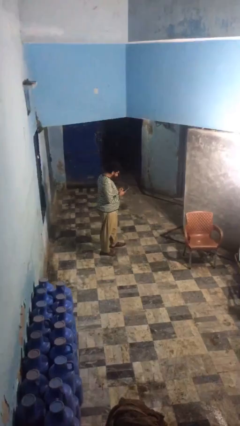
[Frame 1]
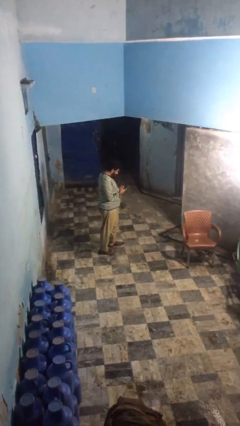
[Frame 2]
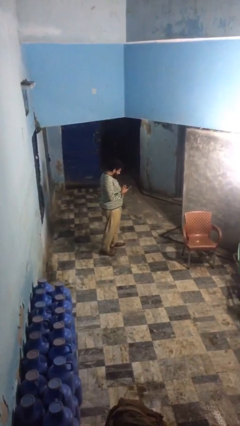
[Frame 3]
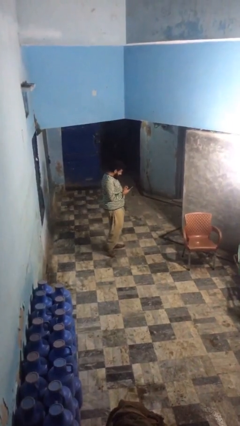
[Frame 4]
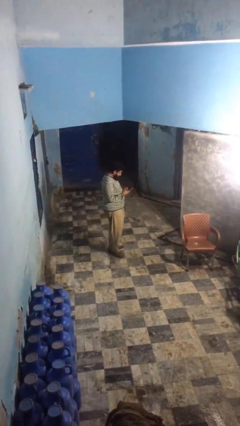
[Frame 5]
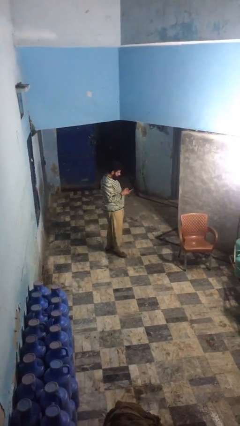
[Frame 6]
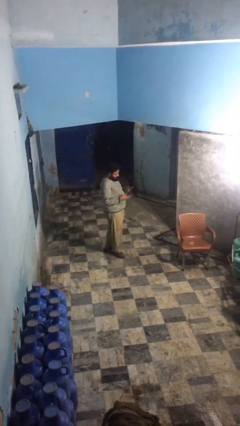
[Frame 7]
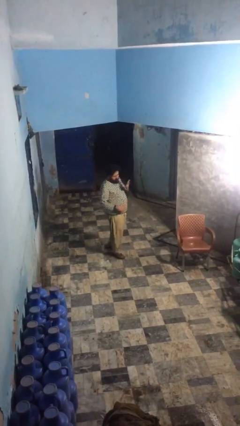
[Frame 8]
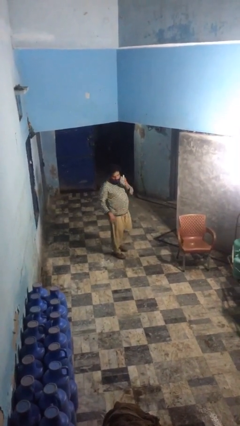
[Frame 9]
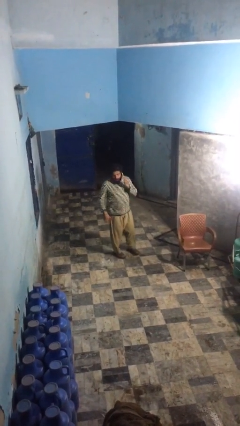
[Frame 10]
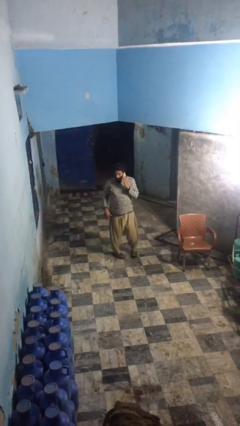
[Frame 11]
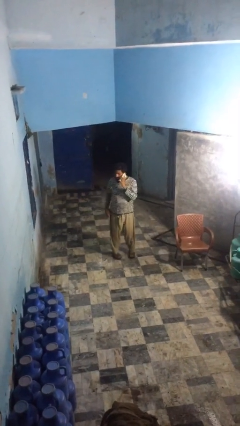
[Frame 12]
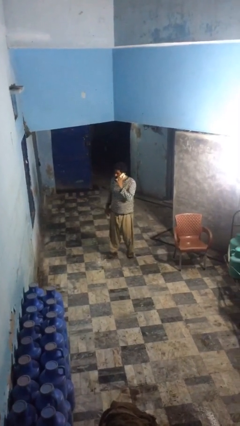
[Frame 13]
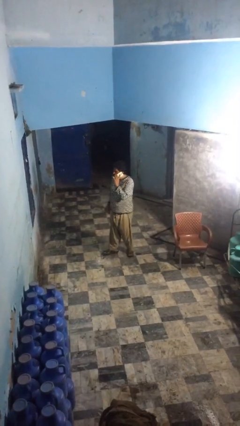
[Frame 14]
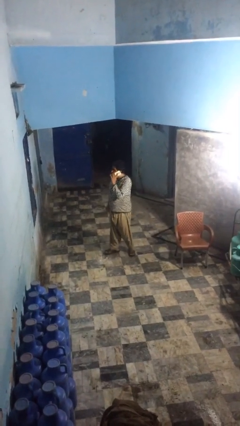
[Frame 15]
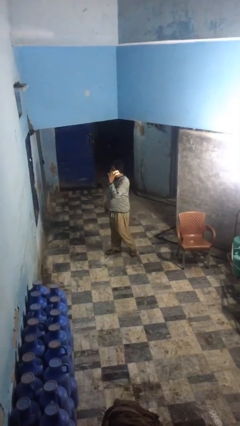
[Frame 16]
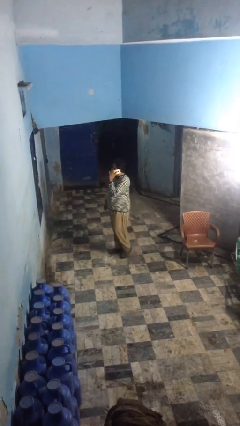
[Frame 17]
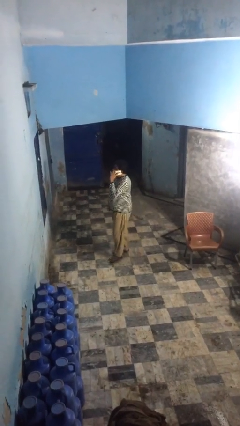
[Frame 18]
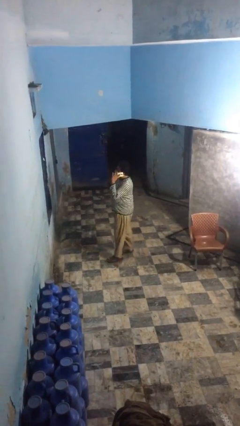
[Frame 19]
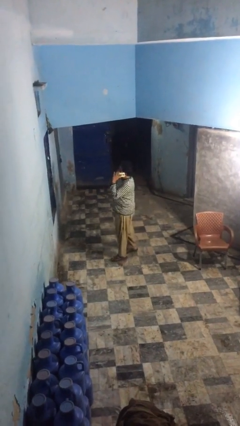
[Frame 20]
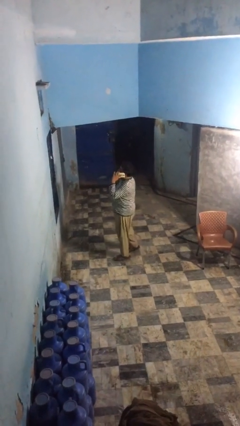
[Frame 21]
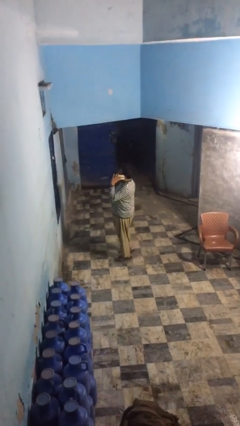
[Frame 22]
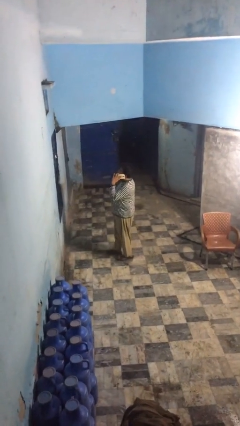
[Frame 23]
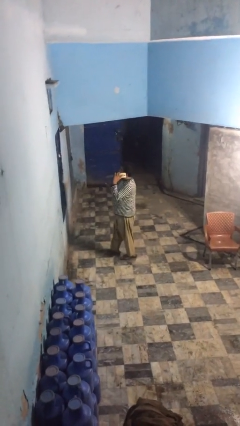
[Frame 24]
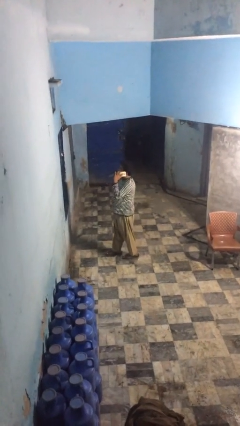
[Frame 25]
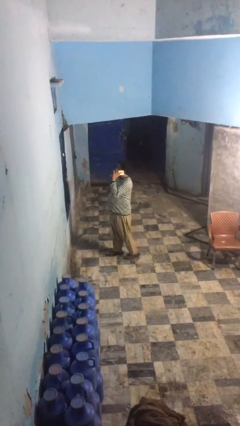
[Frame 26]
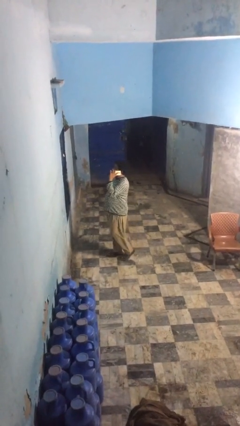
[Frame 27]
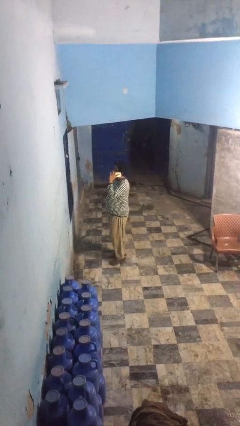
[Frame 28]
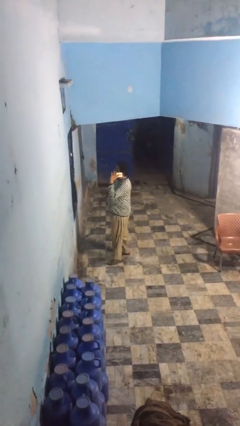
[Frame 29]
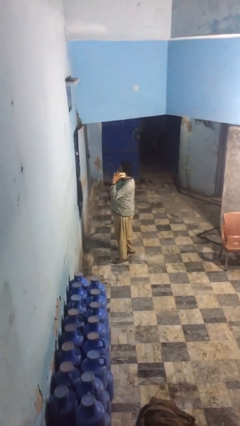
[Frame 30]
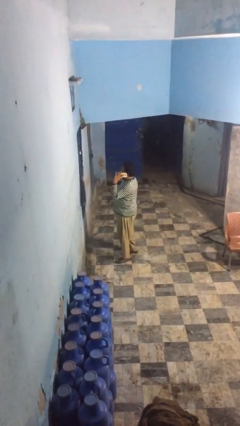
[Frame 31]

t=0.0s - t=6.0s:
person talks on phone

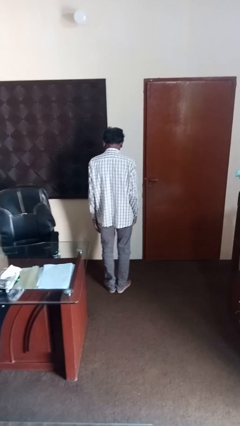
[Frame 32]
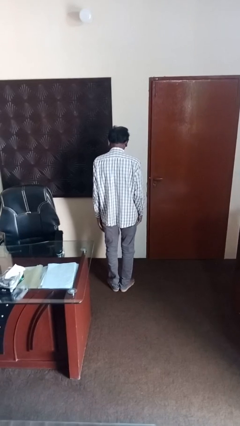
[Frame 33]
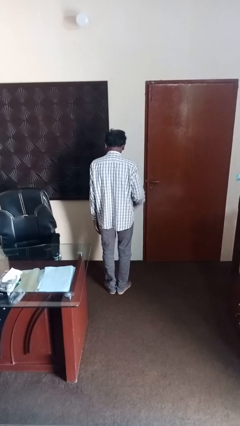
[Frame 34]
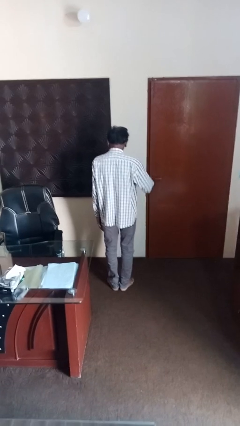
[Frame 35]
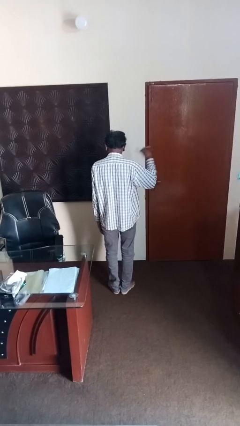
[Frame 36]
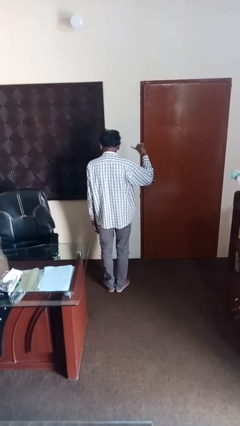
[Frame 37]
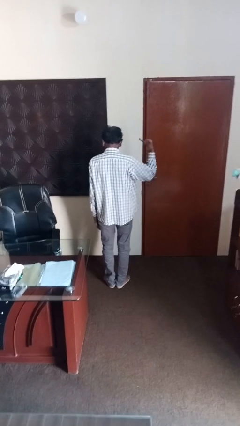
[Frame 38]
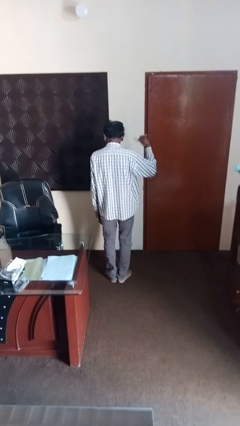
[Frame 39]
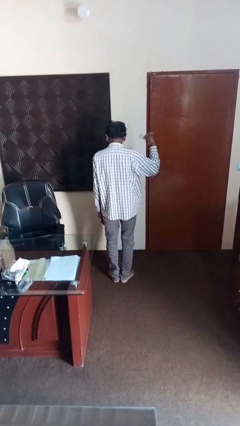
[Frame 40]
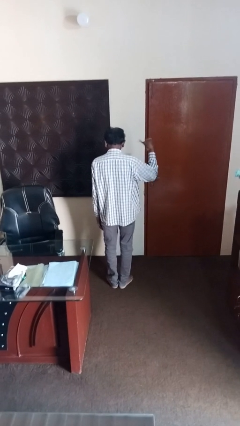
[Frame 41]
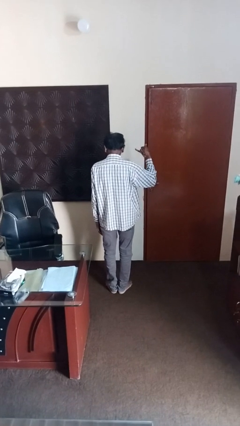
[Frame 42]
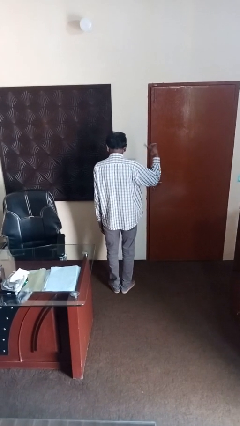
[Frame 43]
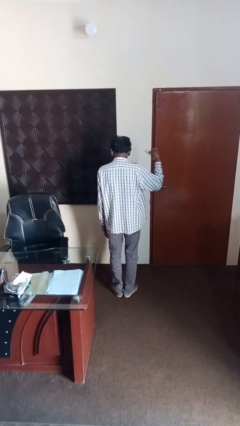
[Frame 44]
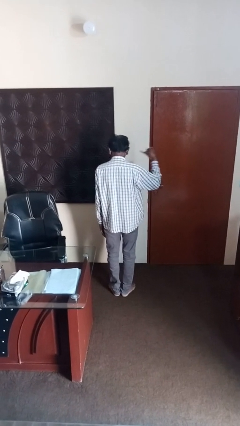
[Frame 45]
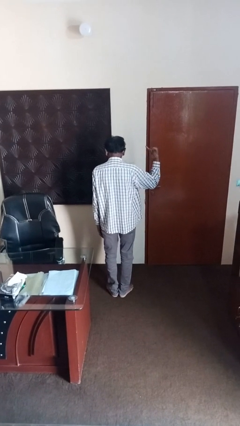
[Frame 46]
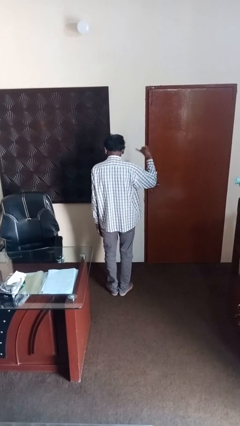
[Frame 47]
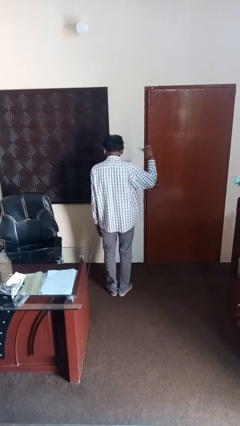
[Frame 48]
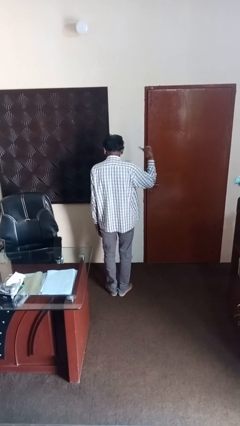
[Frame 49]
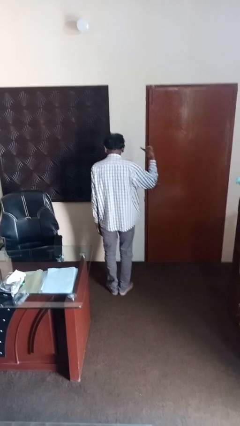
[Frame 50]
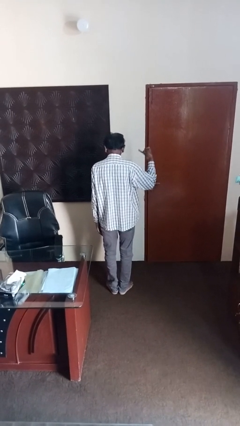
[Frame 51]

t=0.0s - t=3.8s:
person gestures hang loose

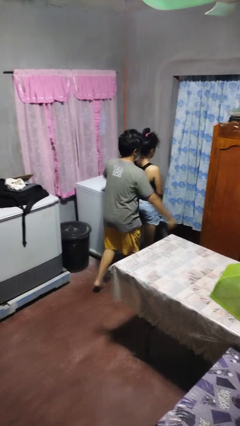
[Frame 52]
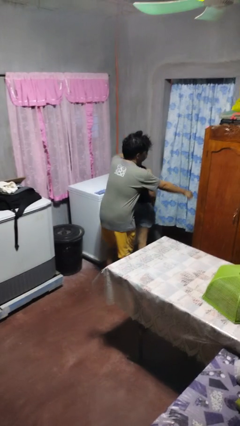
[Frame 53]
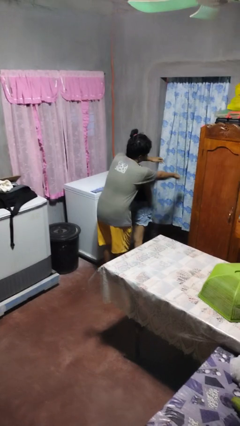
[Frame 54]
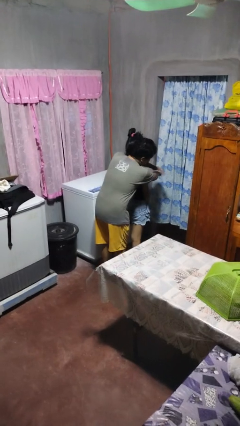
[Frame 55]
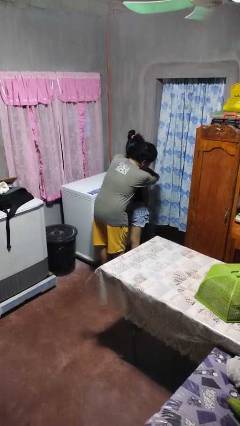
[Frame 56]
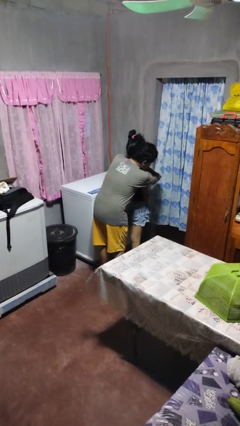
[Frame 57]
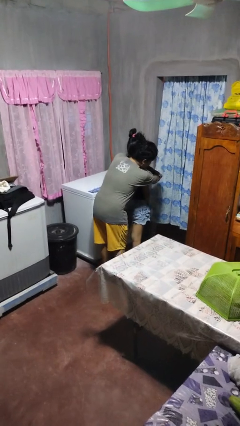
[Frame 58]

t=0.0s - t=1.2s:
person hugs person from behind

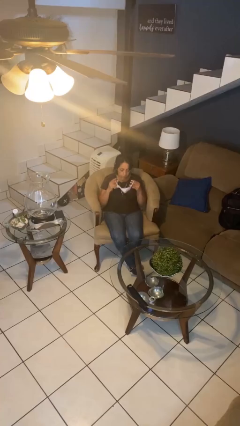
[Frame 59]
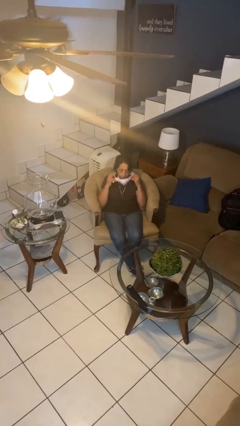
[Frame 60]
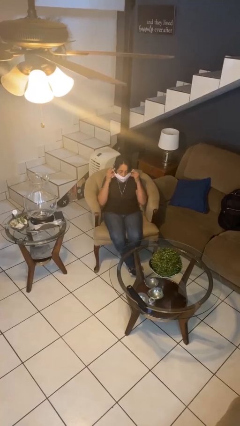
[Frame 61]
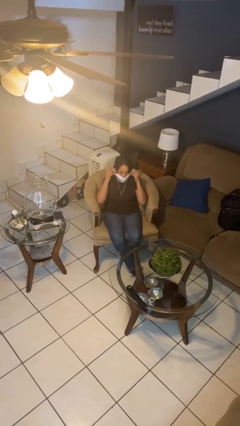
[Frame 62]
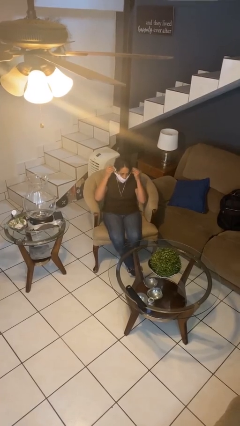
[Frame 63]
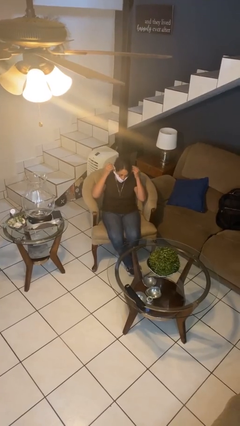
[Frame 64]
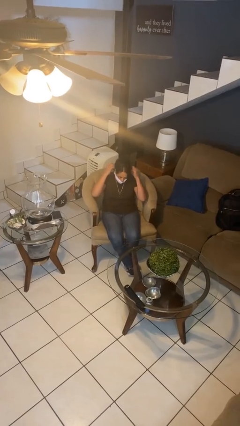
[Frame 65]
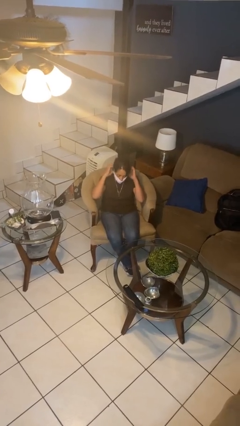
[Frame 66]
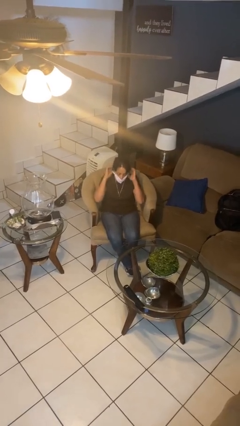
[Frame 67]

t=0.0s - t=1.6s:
person puts on facemask

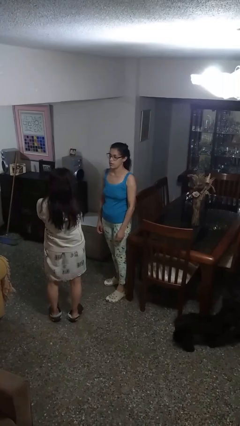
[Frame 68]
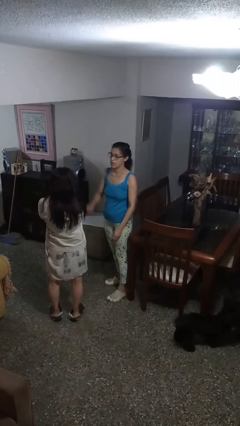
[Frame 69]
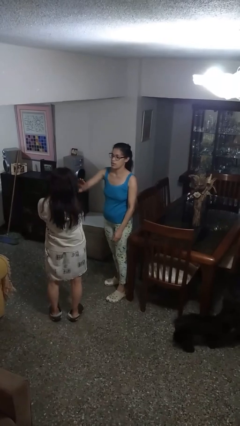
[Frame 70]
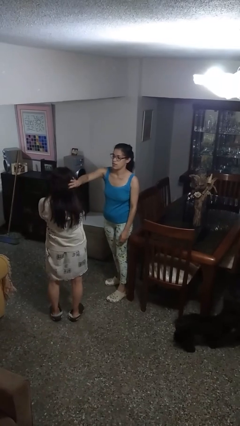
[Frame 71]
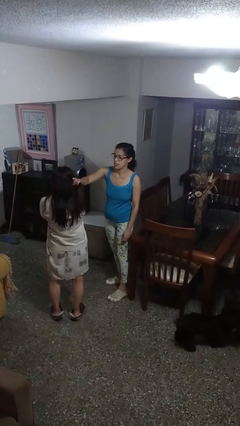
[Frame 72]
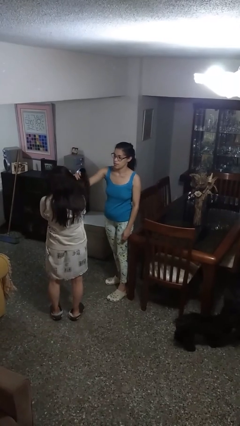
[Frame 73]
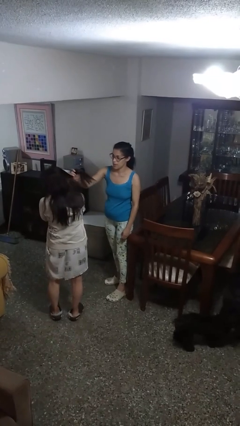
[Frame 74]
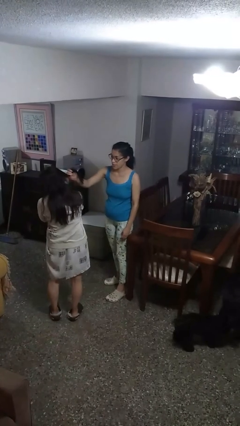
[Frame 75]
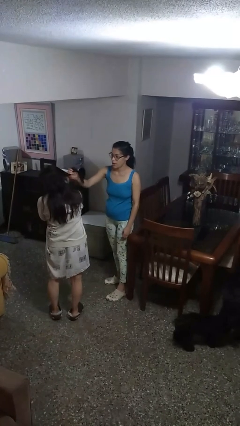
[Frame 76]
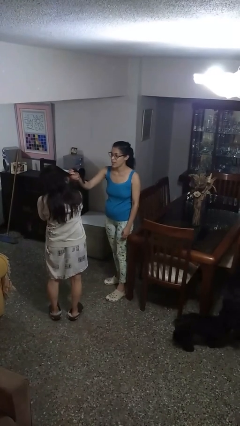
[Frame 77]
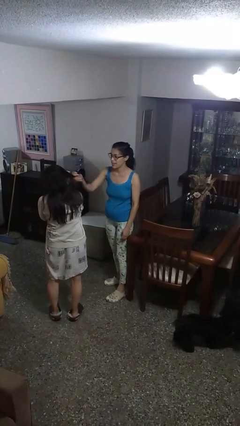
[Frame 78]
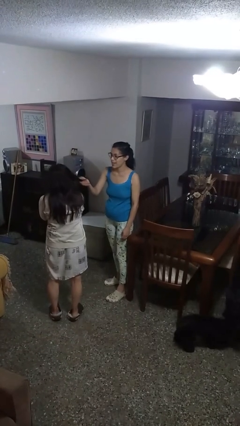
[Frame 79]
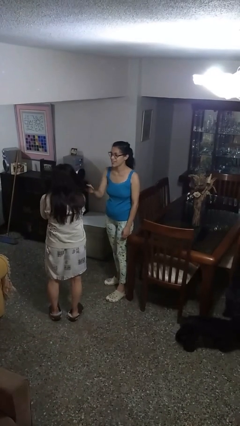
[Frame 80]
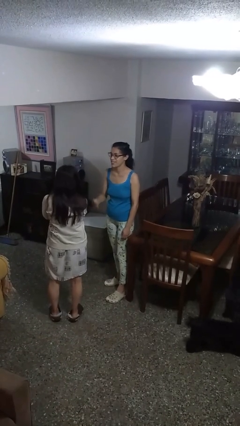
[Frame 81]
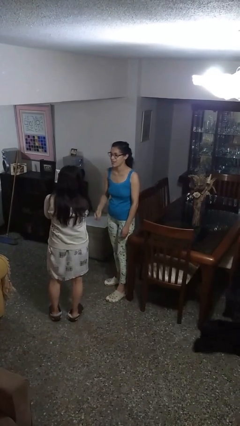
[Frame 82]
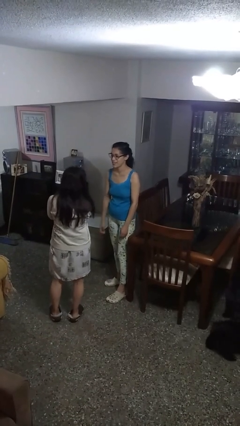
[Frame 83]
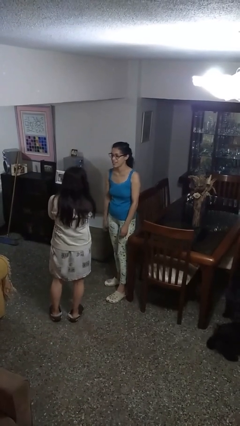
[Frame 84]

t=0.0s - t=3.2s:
person grabs person by hair

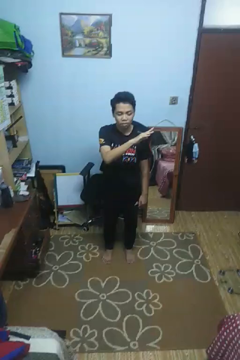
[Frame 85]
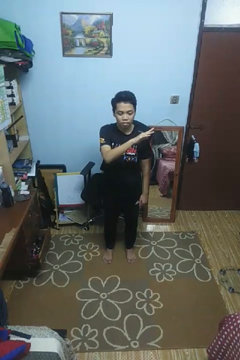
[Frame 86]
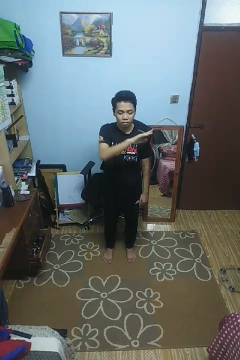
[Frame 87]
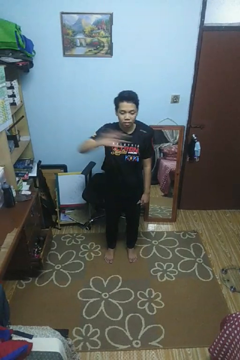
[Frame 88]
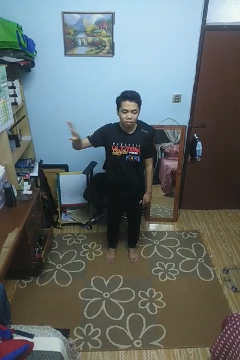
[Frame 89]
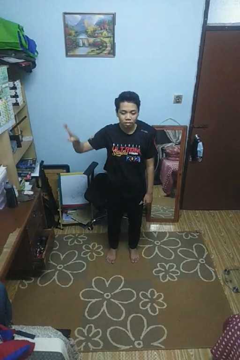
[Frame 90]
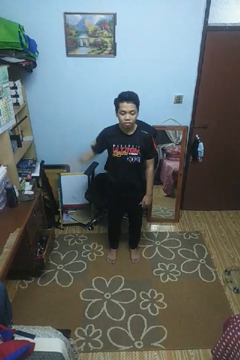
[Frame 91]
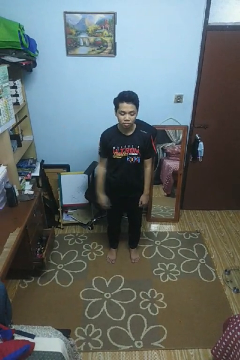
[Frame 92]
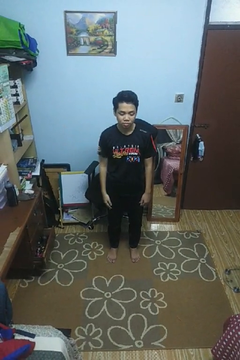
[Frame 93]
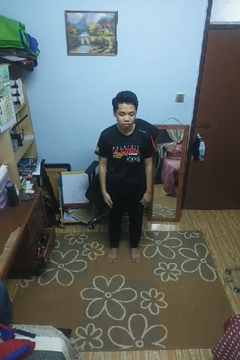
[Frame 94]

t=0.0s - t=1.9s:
person gestures swipe right
